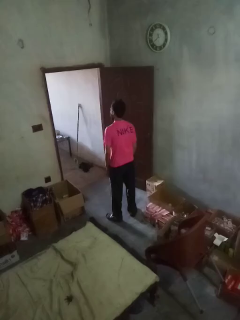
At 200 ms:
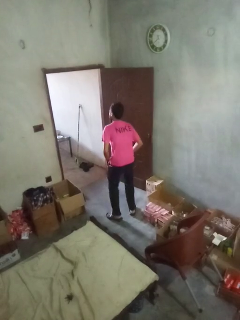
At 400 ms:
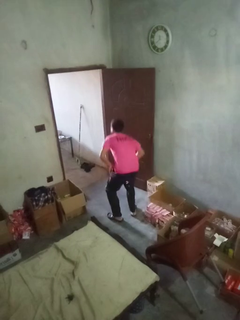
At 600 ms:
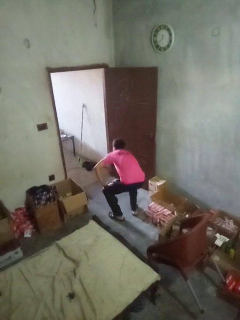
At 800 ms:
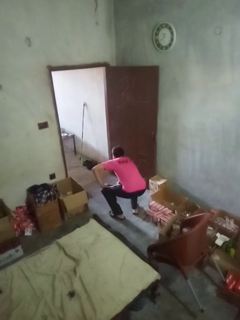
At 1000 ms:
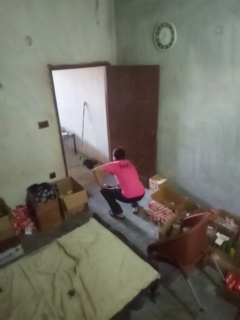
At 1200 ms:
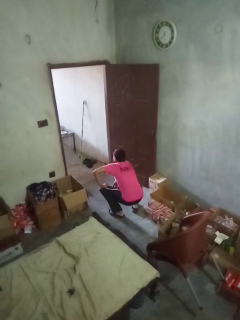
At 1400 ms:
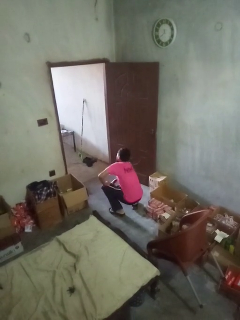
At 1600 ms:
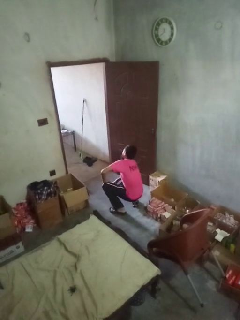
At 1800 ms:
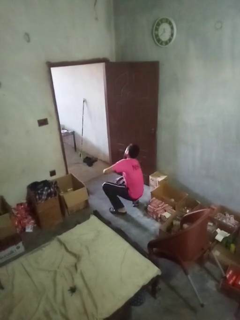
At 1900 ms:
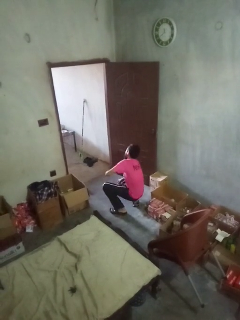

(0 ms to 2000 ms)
person trips on object on floor

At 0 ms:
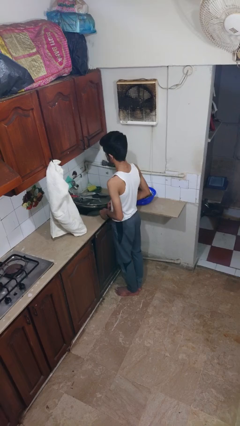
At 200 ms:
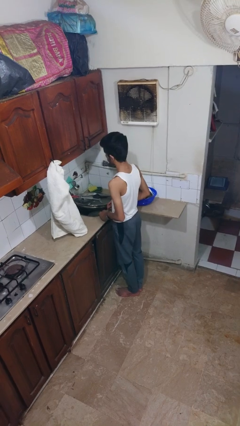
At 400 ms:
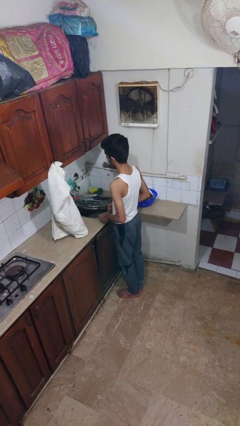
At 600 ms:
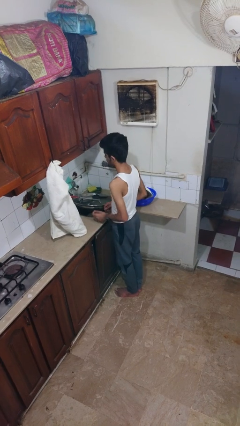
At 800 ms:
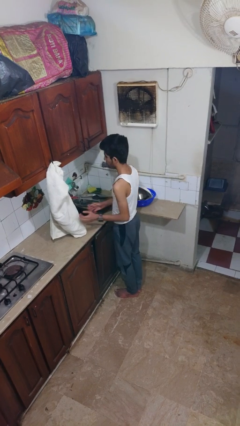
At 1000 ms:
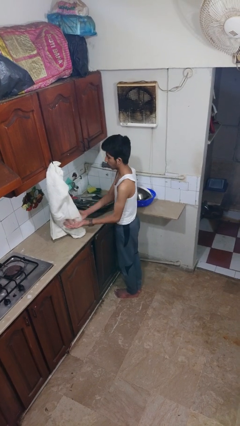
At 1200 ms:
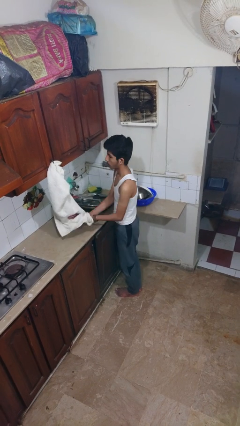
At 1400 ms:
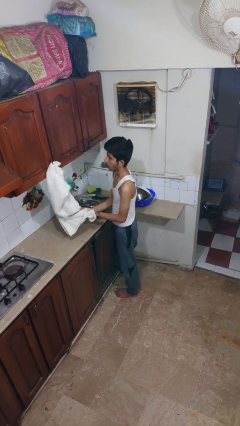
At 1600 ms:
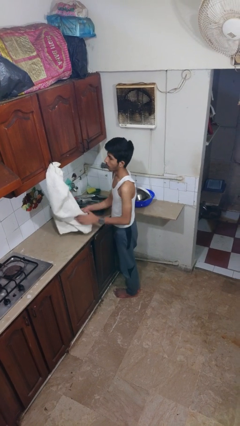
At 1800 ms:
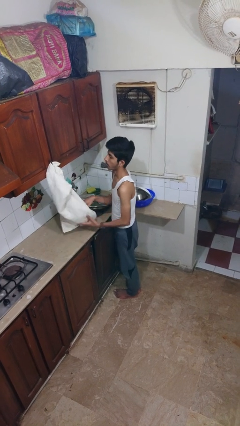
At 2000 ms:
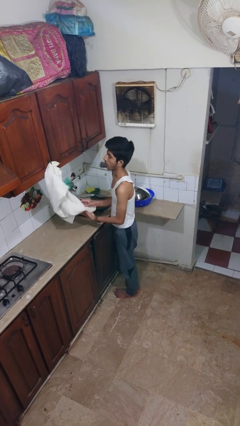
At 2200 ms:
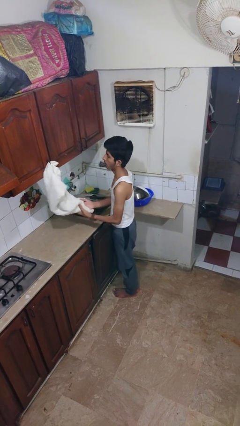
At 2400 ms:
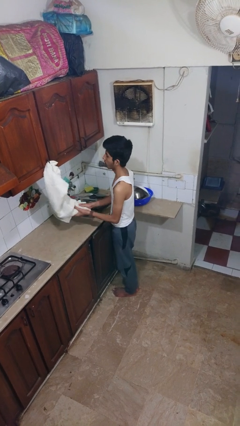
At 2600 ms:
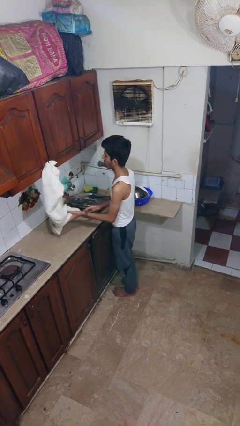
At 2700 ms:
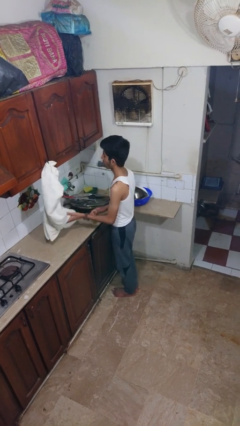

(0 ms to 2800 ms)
person dries hands with towel

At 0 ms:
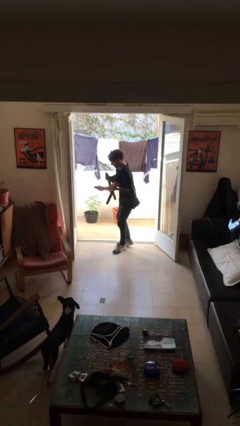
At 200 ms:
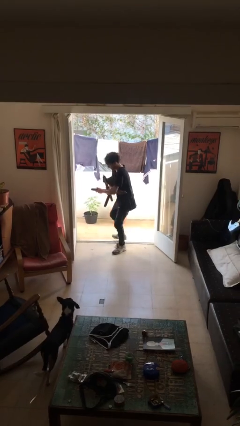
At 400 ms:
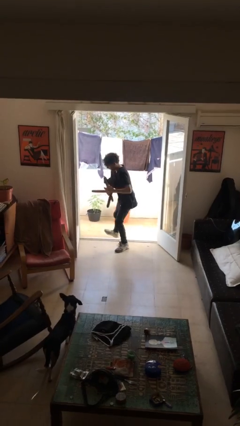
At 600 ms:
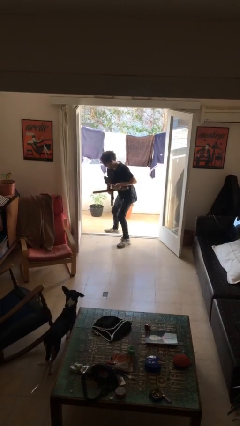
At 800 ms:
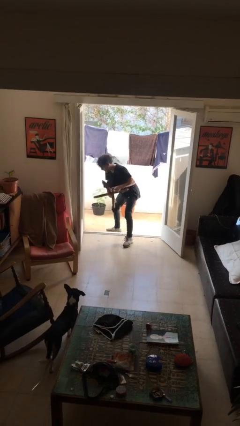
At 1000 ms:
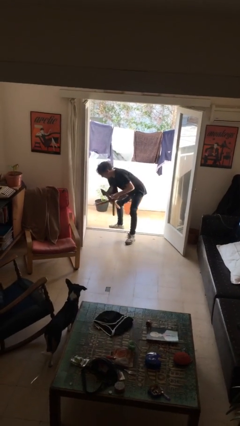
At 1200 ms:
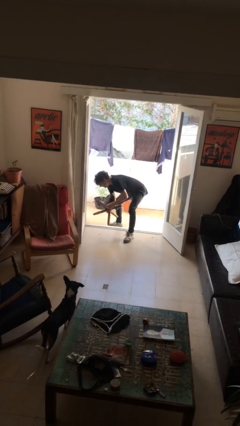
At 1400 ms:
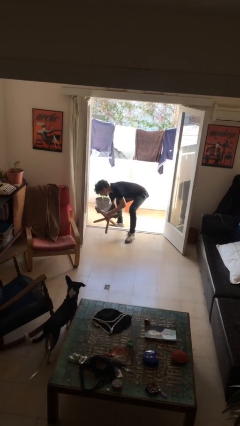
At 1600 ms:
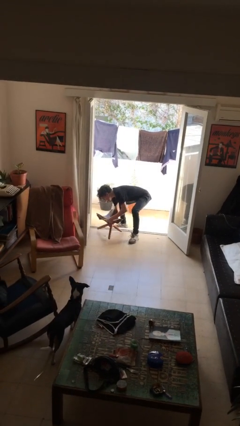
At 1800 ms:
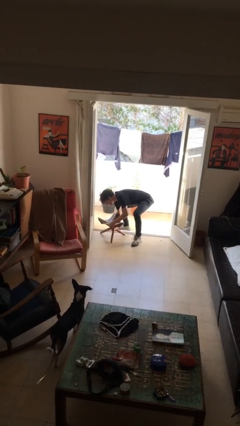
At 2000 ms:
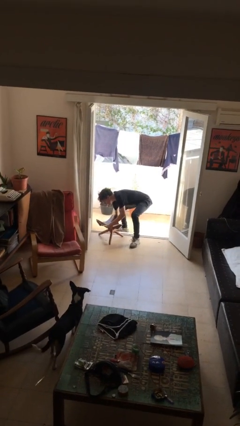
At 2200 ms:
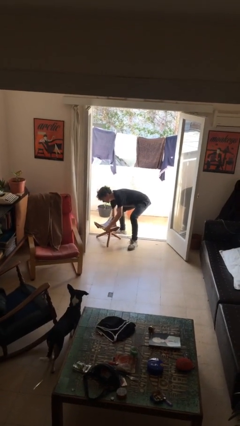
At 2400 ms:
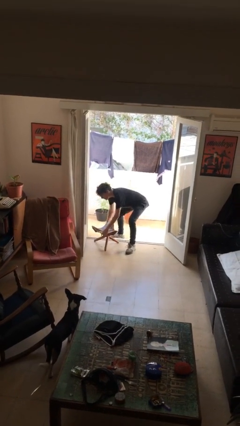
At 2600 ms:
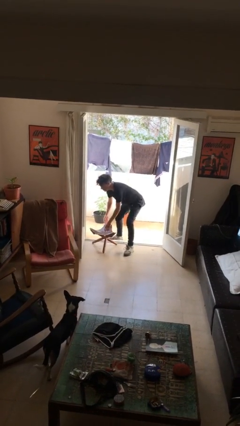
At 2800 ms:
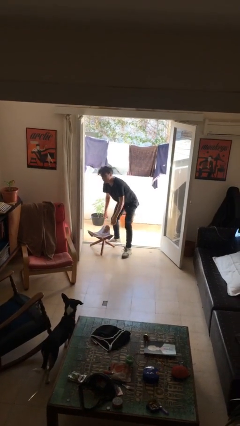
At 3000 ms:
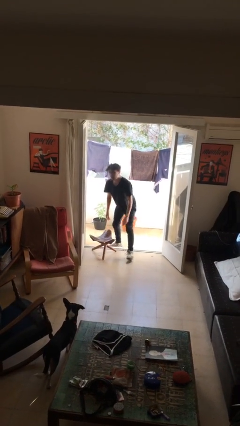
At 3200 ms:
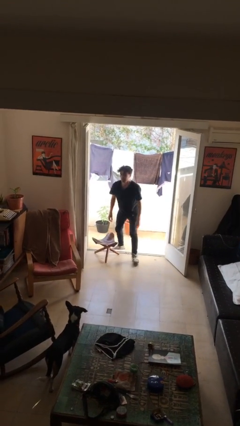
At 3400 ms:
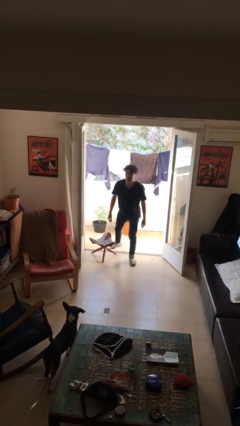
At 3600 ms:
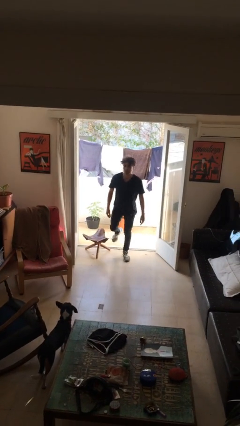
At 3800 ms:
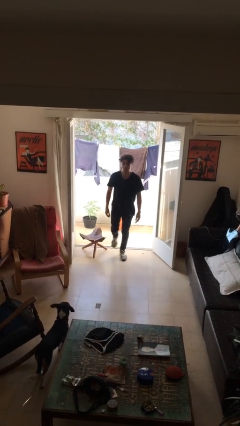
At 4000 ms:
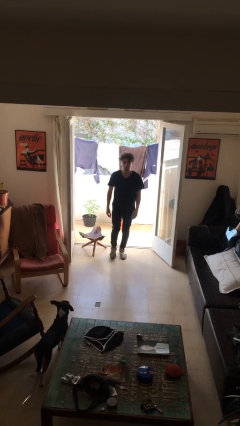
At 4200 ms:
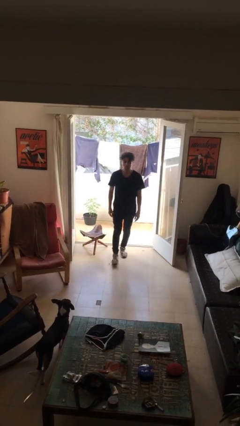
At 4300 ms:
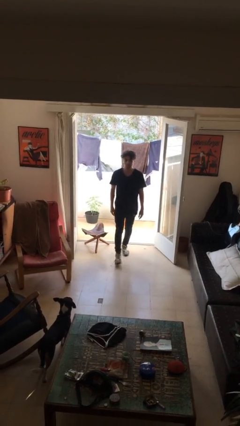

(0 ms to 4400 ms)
person puts down object on floor

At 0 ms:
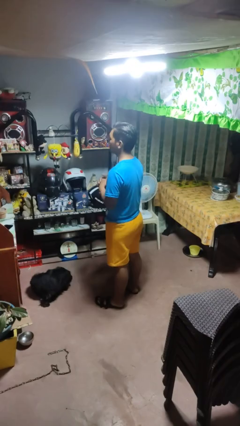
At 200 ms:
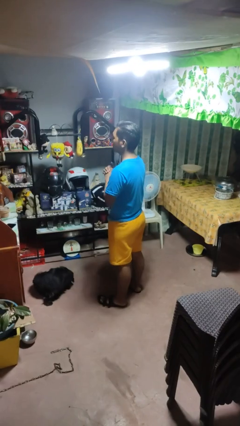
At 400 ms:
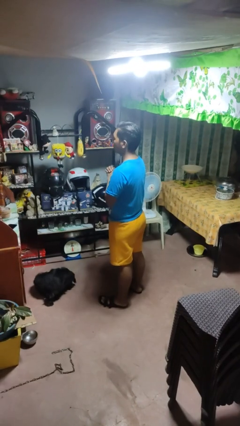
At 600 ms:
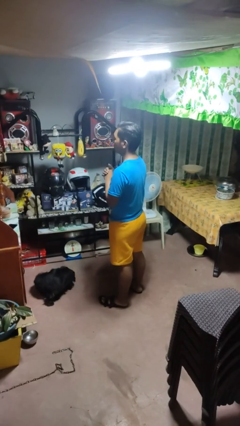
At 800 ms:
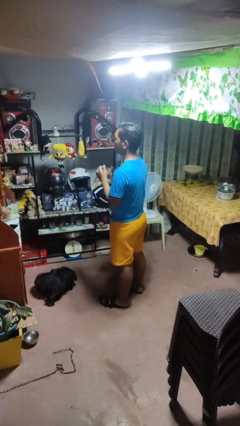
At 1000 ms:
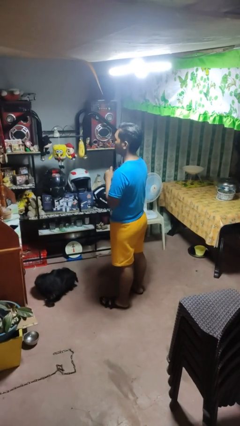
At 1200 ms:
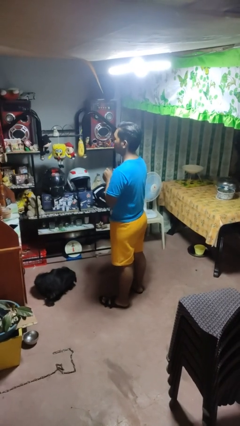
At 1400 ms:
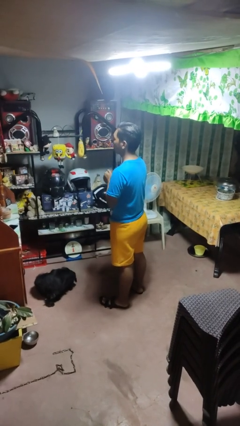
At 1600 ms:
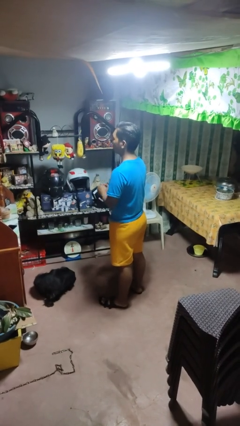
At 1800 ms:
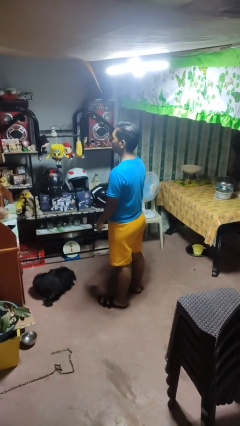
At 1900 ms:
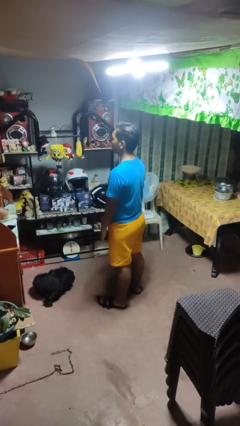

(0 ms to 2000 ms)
person cracks knuckles

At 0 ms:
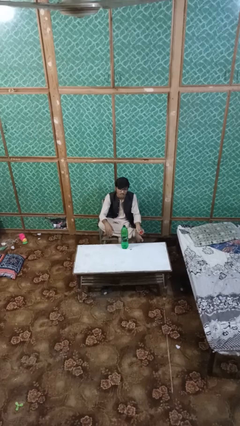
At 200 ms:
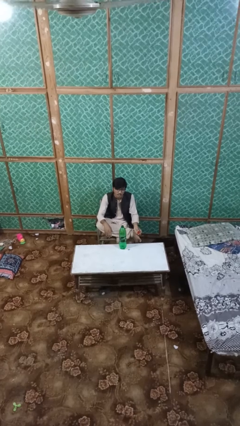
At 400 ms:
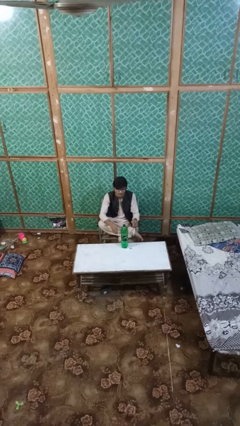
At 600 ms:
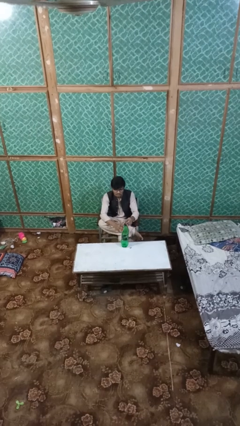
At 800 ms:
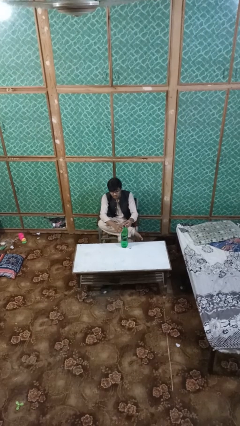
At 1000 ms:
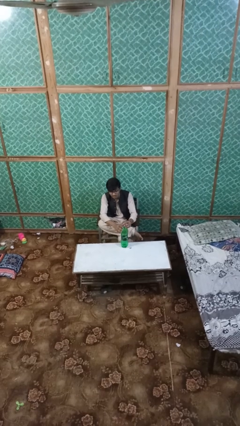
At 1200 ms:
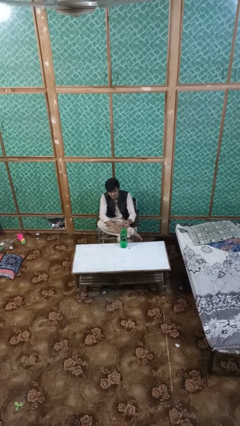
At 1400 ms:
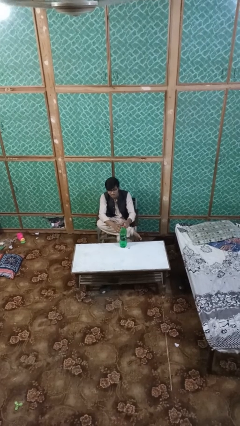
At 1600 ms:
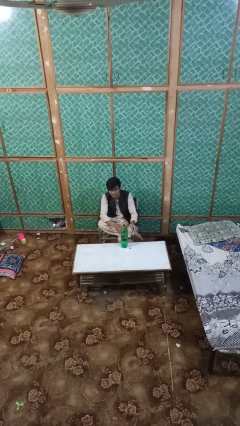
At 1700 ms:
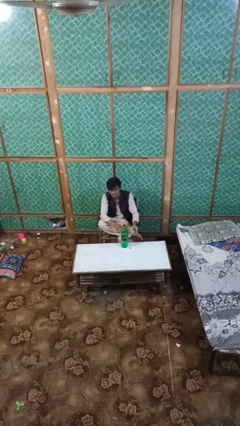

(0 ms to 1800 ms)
person screws lid to bottle

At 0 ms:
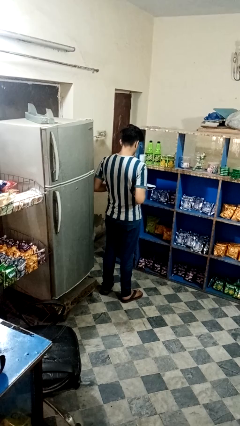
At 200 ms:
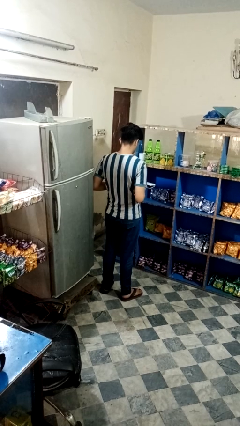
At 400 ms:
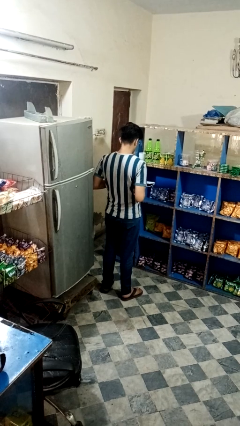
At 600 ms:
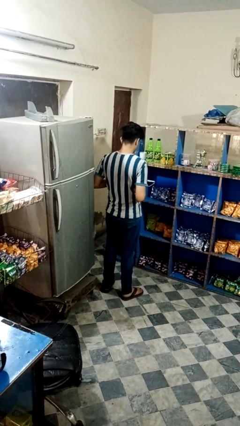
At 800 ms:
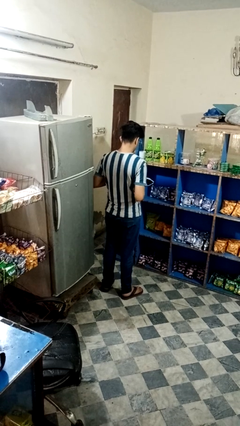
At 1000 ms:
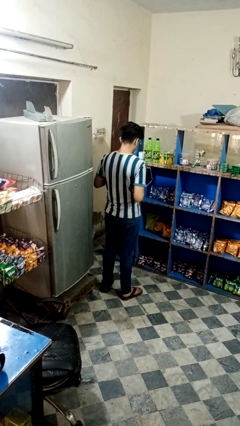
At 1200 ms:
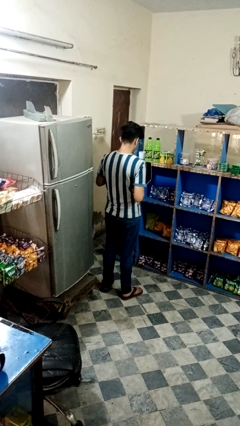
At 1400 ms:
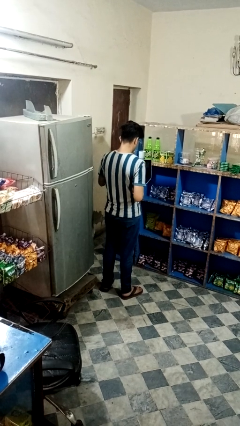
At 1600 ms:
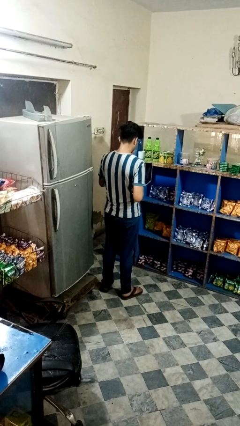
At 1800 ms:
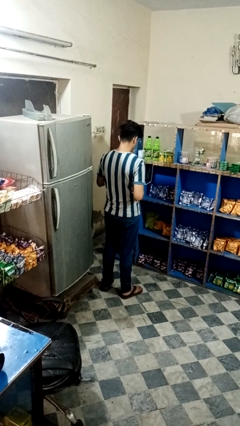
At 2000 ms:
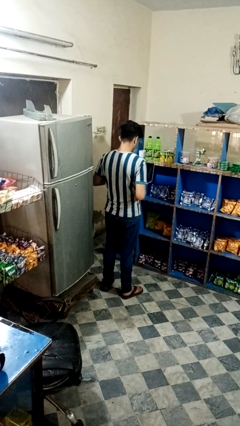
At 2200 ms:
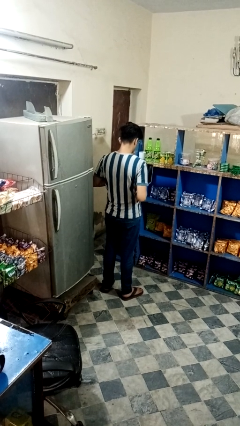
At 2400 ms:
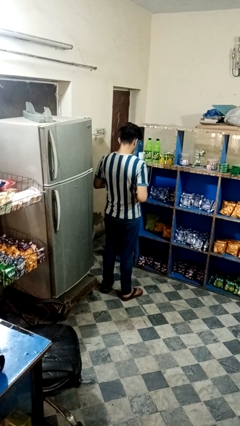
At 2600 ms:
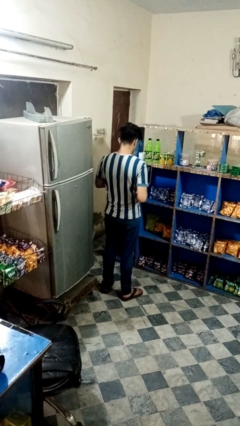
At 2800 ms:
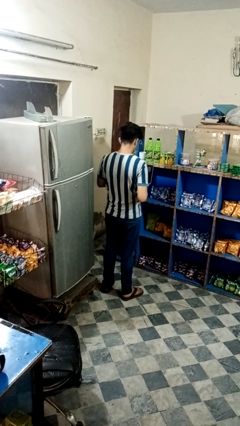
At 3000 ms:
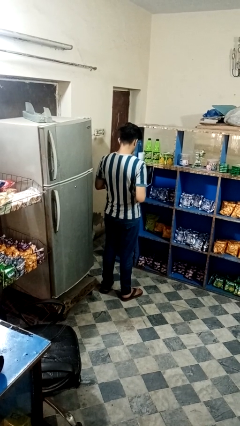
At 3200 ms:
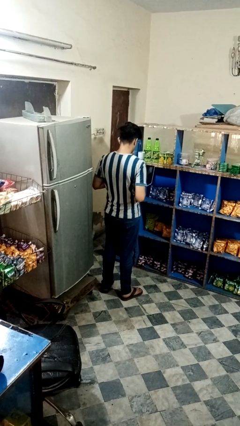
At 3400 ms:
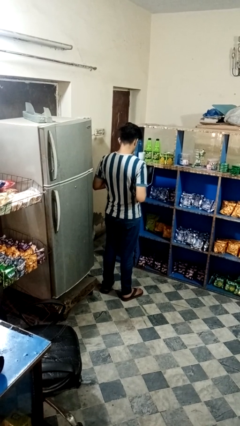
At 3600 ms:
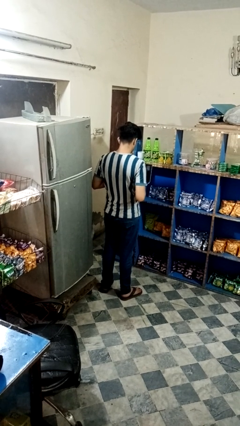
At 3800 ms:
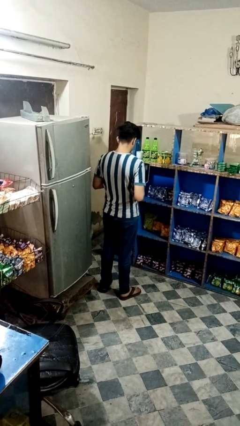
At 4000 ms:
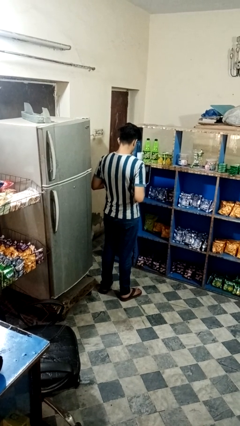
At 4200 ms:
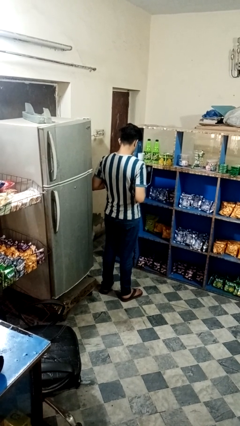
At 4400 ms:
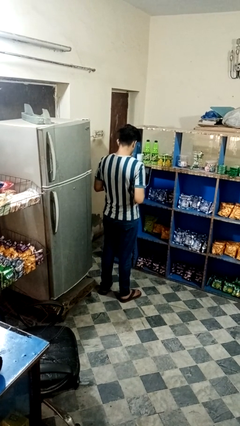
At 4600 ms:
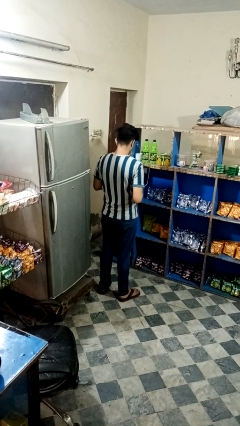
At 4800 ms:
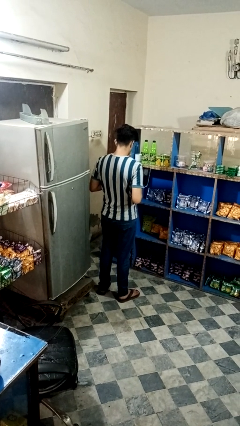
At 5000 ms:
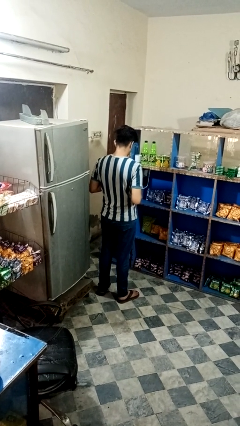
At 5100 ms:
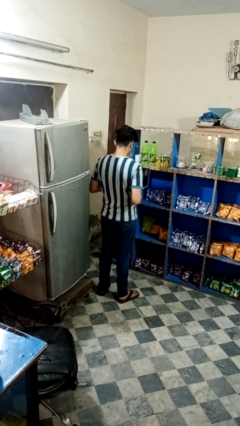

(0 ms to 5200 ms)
person opens laptop
